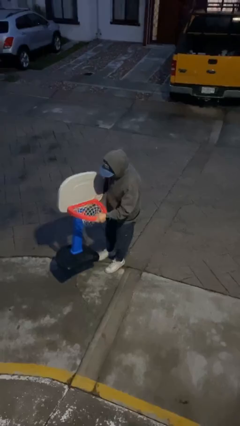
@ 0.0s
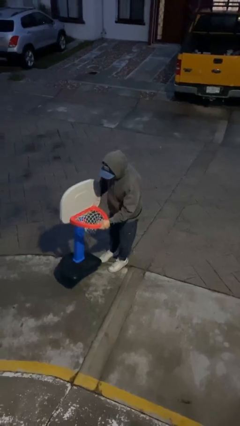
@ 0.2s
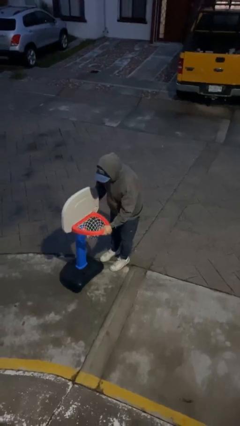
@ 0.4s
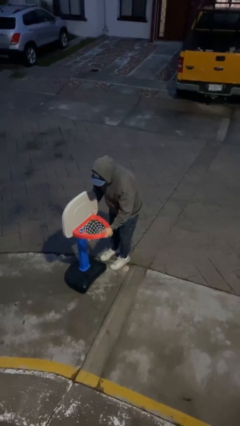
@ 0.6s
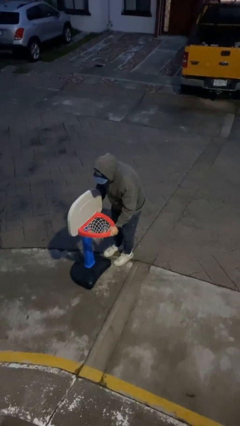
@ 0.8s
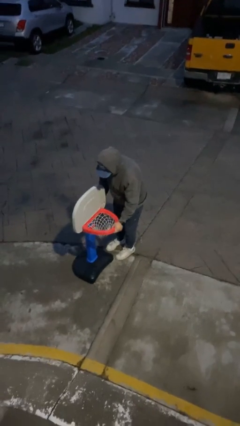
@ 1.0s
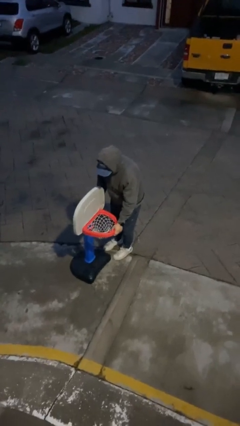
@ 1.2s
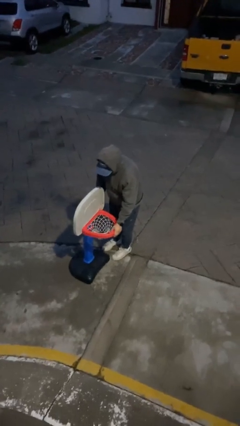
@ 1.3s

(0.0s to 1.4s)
person puts down object on floor

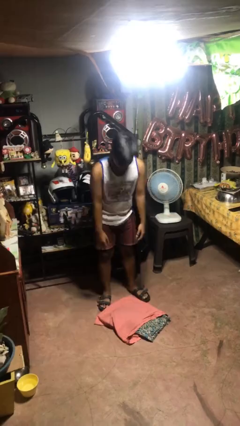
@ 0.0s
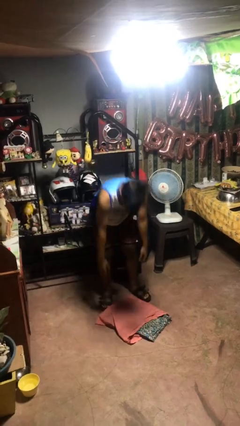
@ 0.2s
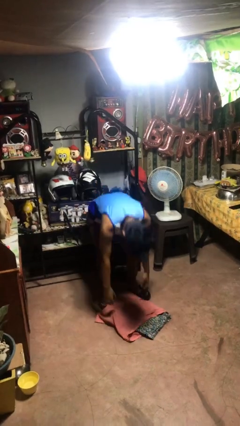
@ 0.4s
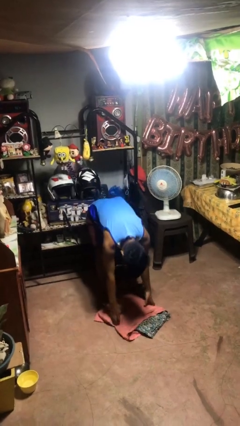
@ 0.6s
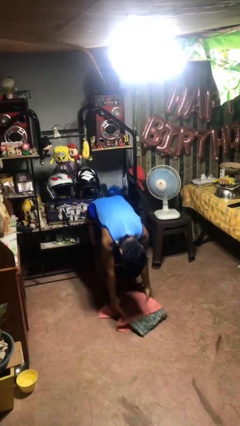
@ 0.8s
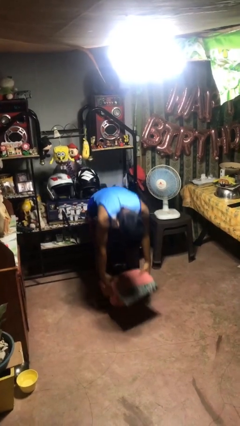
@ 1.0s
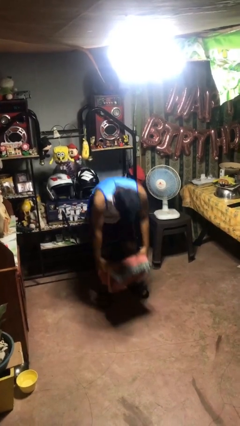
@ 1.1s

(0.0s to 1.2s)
person picks up object from floor

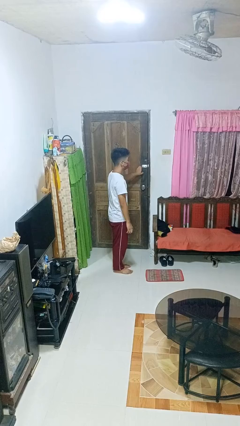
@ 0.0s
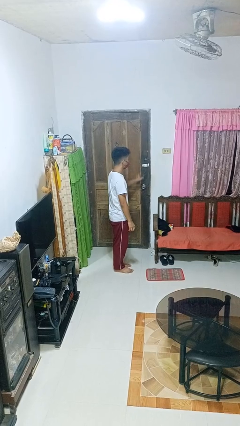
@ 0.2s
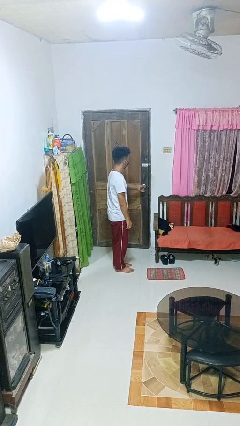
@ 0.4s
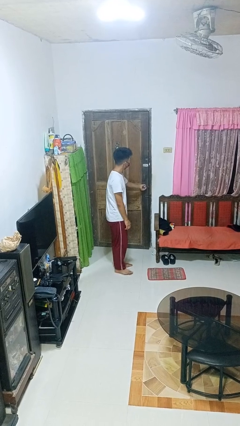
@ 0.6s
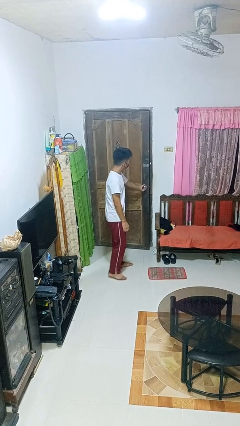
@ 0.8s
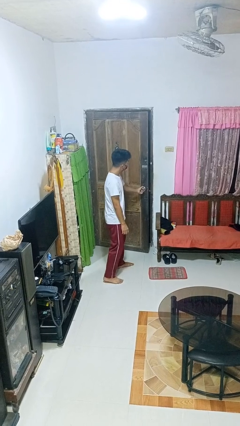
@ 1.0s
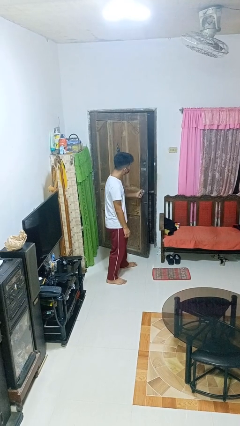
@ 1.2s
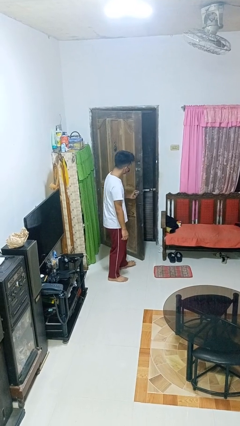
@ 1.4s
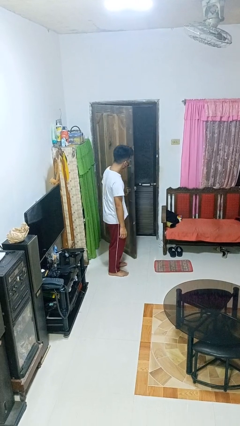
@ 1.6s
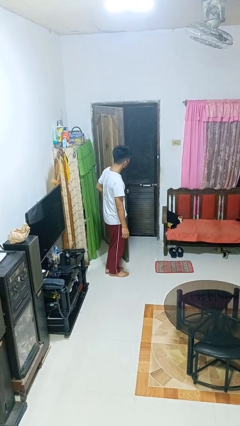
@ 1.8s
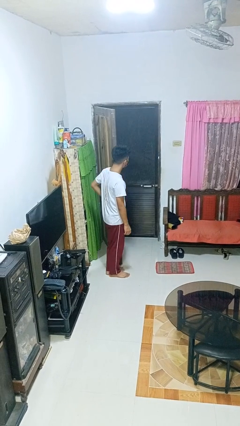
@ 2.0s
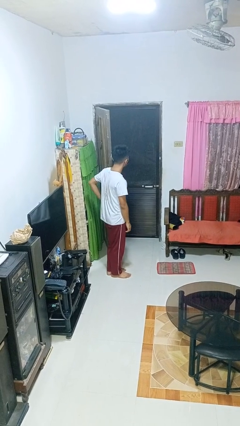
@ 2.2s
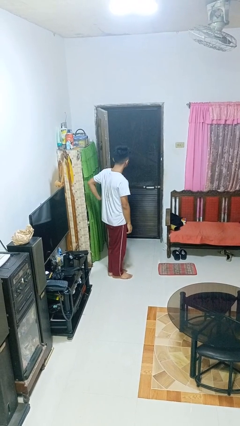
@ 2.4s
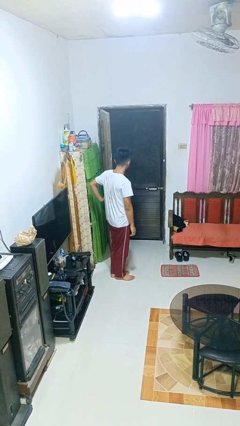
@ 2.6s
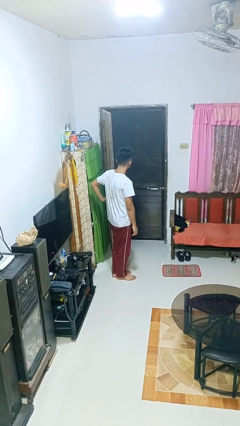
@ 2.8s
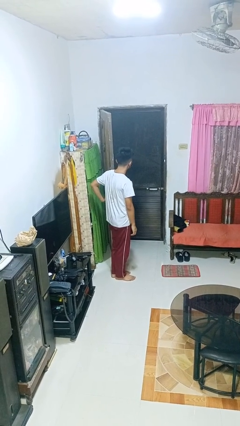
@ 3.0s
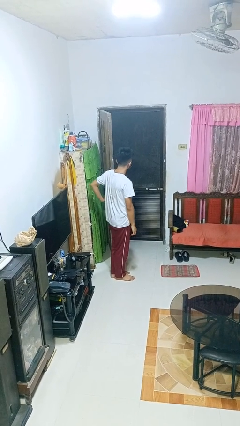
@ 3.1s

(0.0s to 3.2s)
person opens facility door

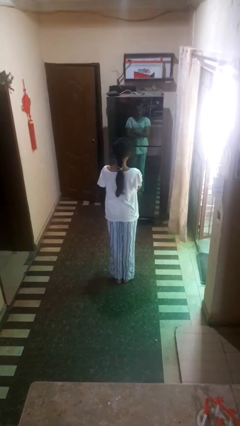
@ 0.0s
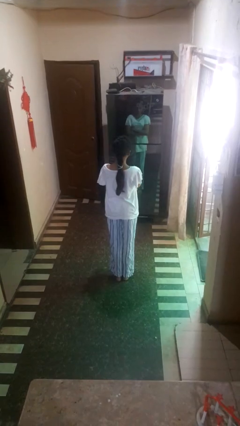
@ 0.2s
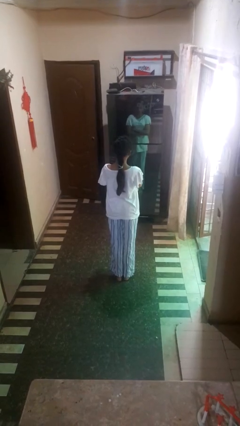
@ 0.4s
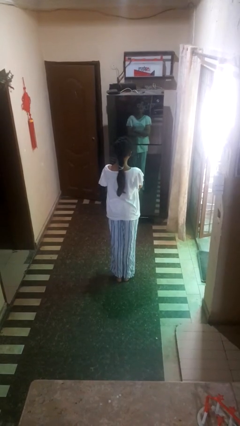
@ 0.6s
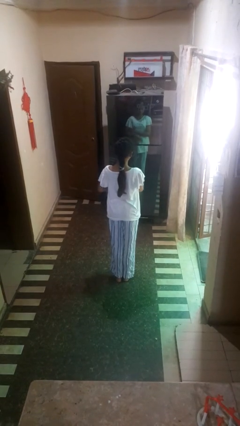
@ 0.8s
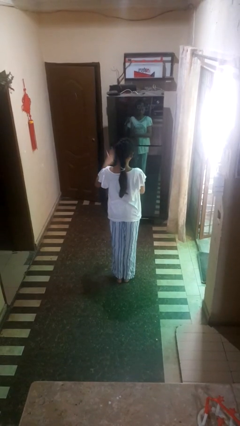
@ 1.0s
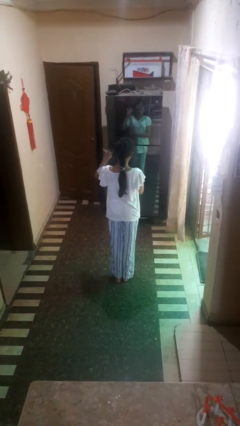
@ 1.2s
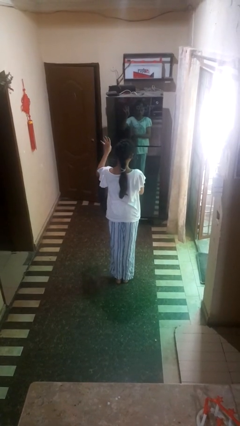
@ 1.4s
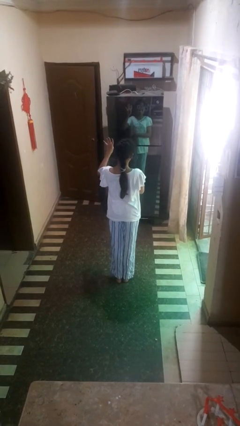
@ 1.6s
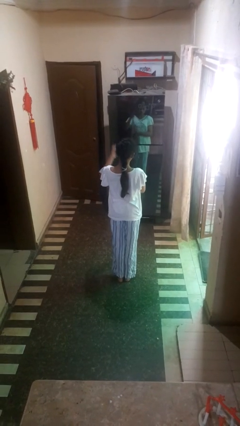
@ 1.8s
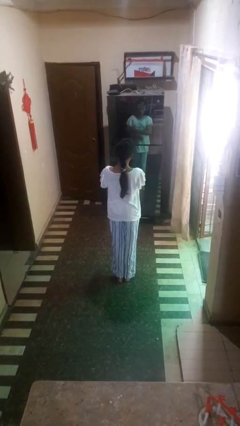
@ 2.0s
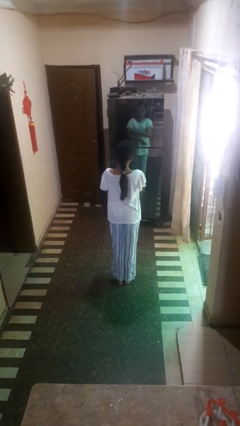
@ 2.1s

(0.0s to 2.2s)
person gestures number four

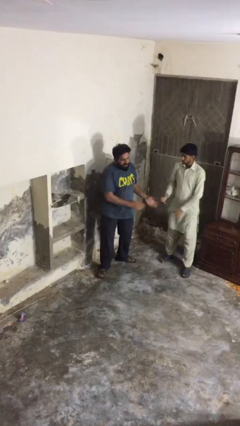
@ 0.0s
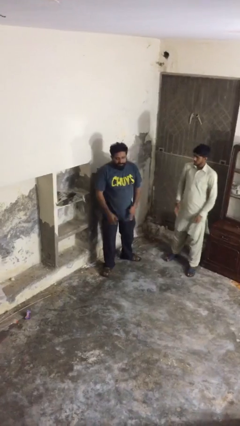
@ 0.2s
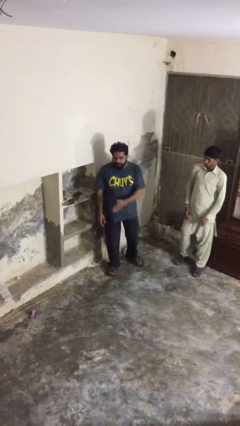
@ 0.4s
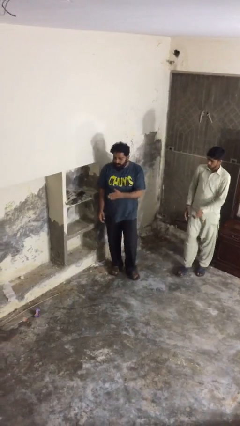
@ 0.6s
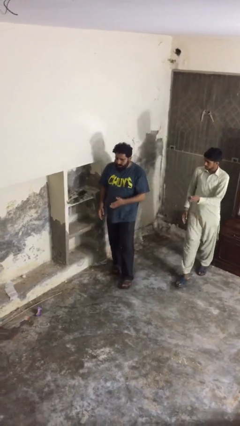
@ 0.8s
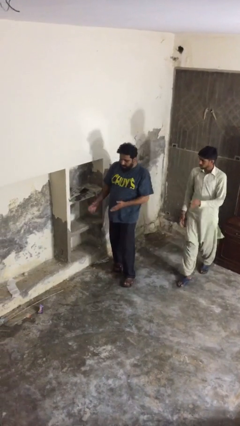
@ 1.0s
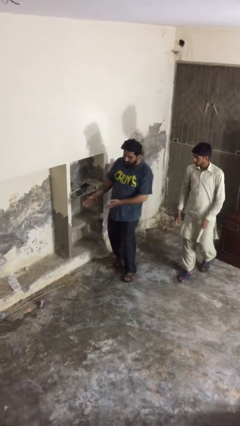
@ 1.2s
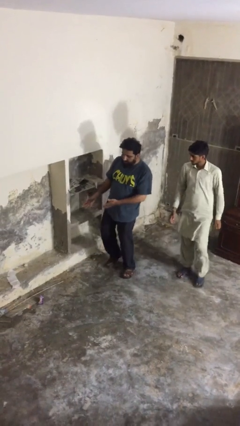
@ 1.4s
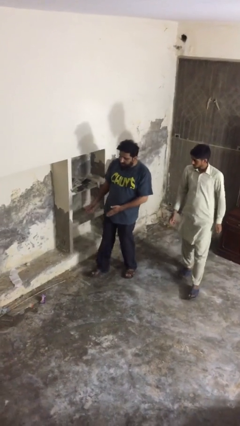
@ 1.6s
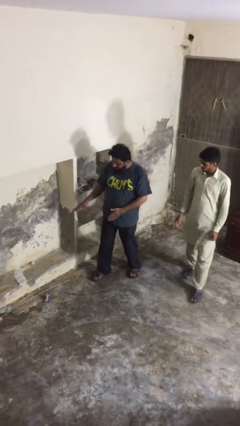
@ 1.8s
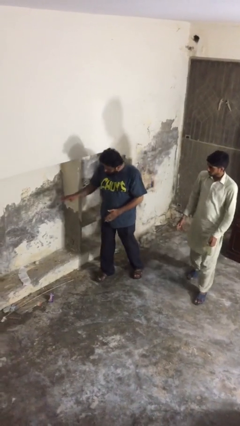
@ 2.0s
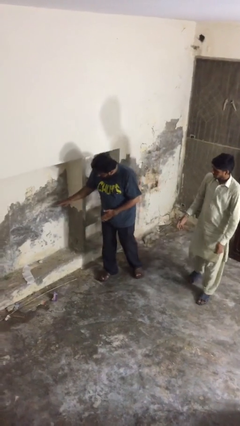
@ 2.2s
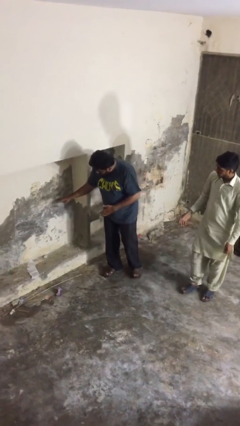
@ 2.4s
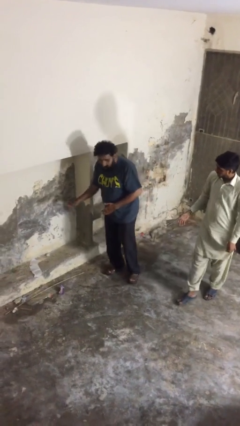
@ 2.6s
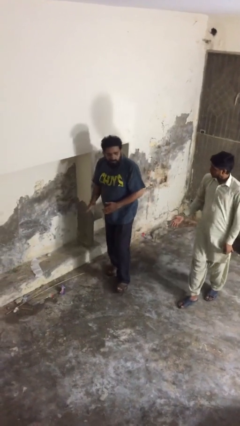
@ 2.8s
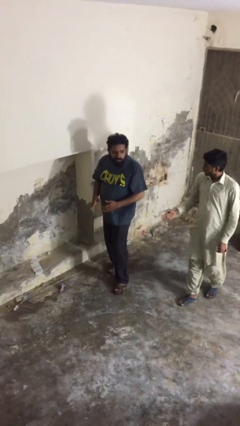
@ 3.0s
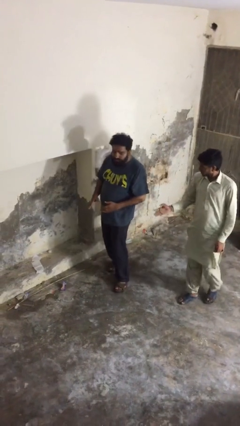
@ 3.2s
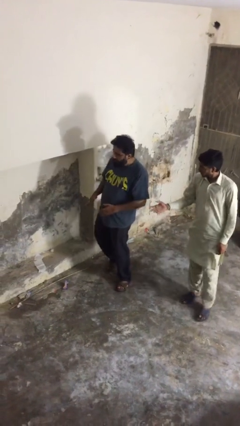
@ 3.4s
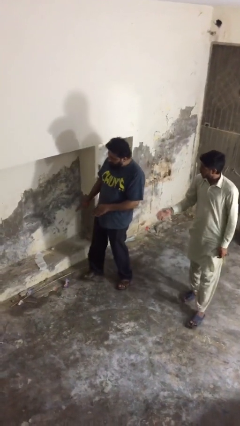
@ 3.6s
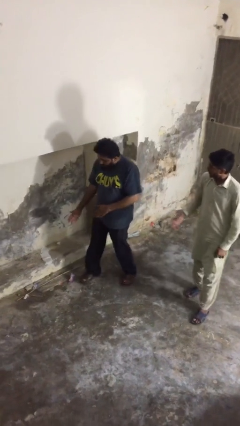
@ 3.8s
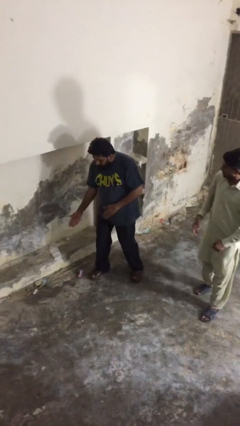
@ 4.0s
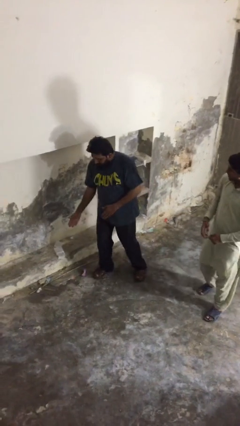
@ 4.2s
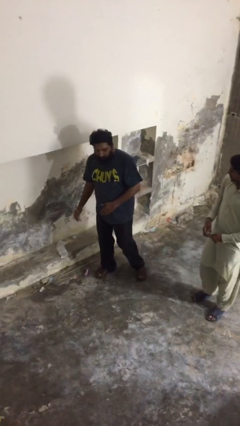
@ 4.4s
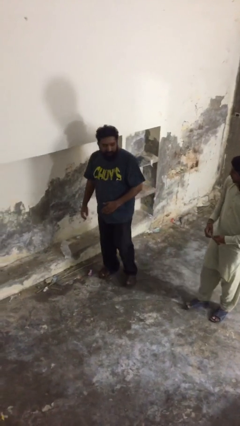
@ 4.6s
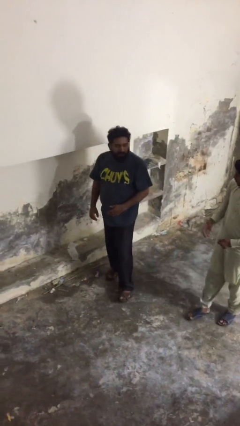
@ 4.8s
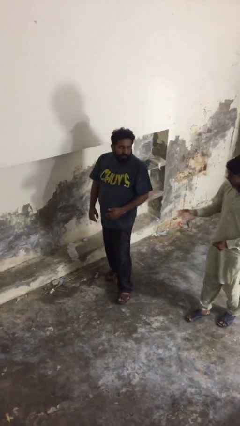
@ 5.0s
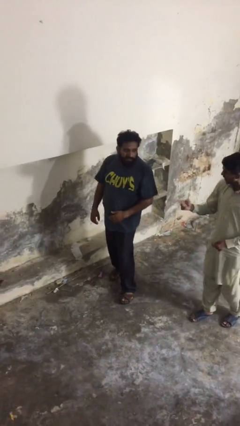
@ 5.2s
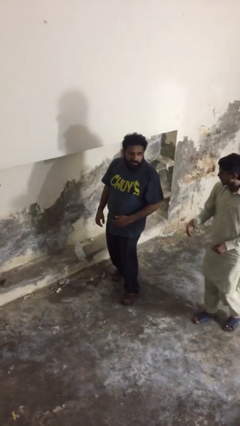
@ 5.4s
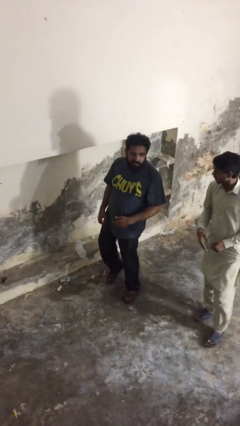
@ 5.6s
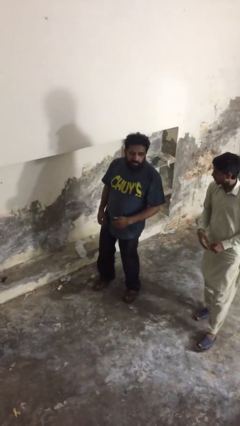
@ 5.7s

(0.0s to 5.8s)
person talks to person

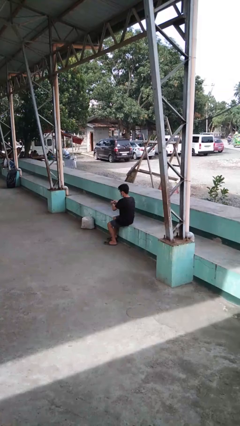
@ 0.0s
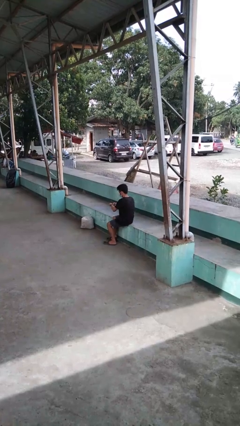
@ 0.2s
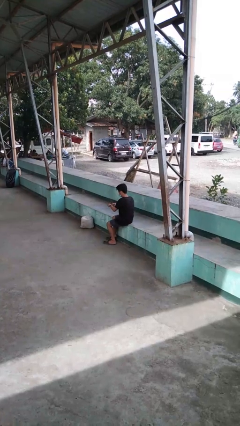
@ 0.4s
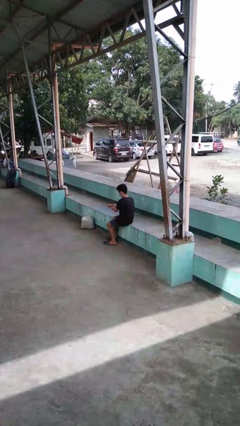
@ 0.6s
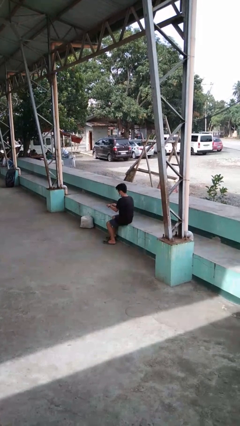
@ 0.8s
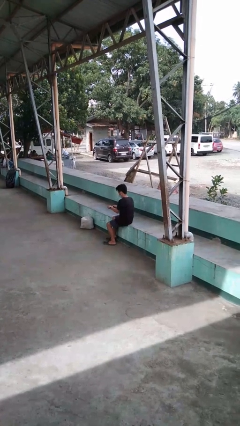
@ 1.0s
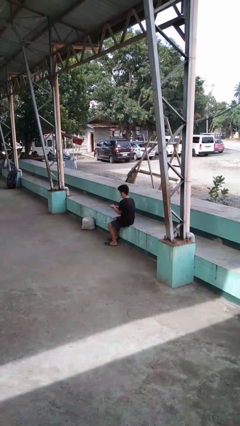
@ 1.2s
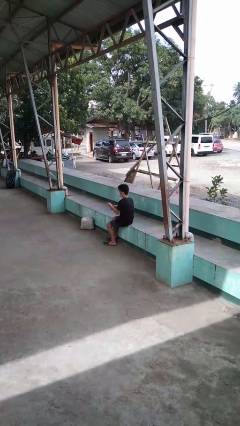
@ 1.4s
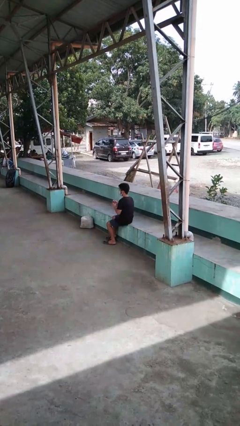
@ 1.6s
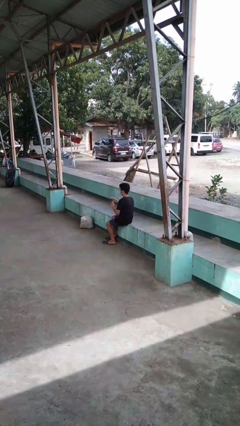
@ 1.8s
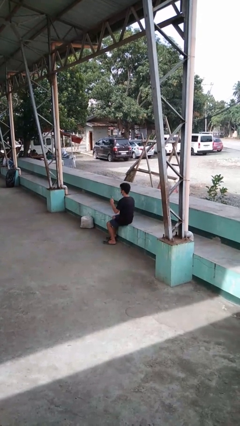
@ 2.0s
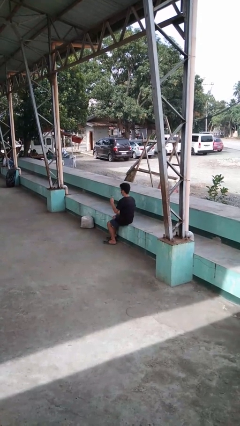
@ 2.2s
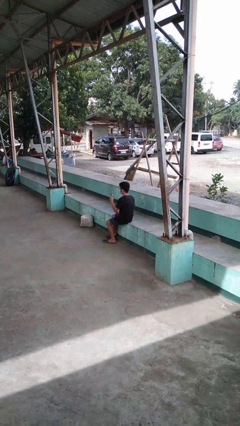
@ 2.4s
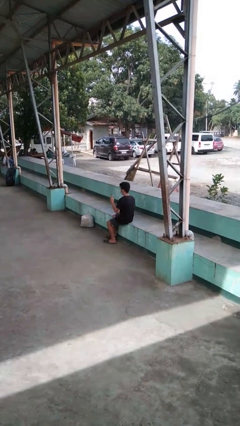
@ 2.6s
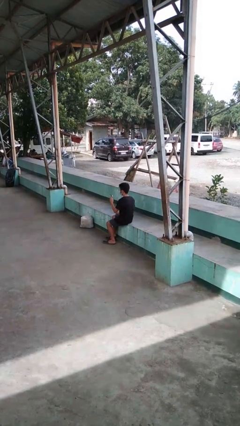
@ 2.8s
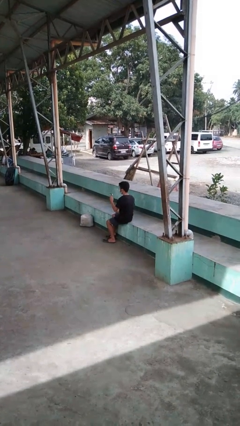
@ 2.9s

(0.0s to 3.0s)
person takes off wristwatch

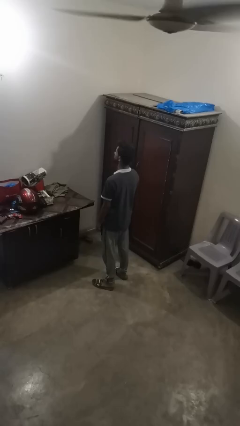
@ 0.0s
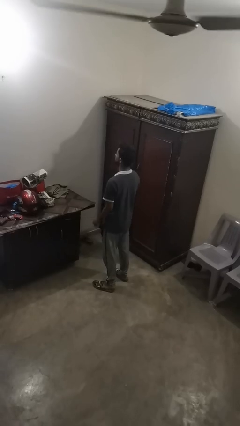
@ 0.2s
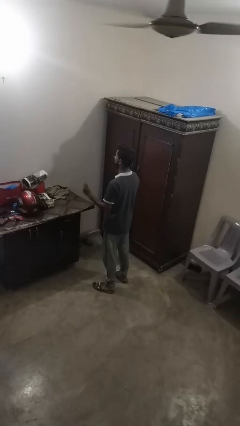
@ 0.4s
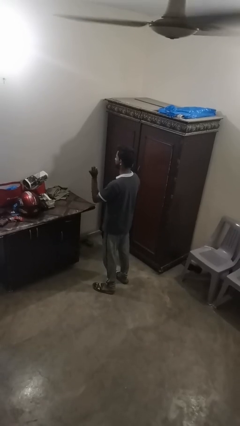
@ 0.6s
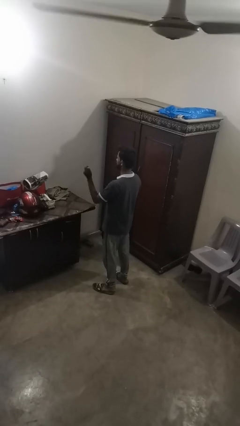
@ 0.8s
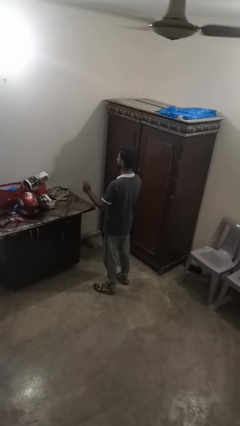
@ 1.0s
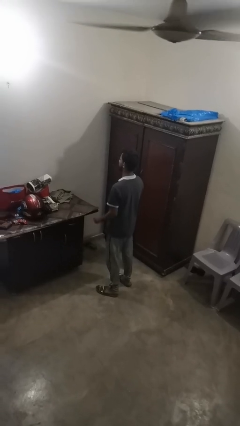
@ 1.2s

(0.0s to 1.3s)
person snaps fingers
